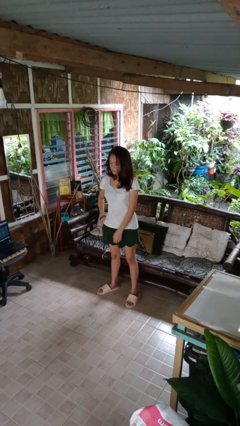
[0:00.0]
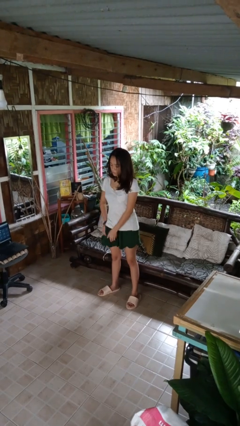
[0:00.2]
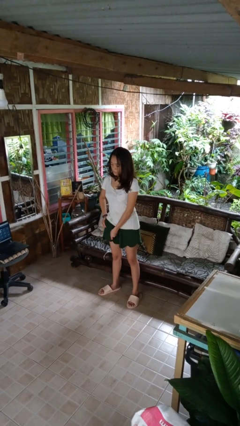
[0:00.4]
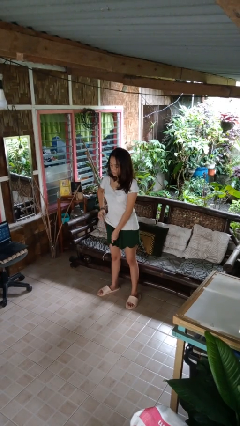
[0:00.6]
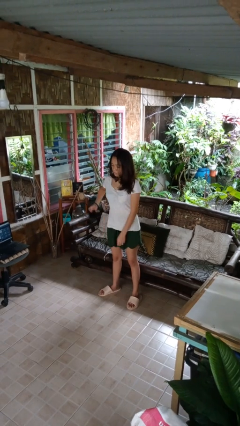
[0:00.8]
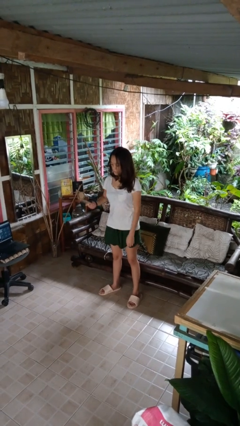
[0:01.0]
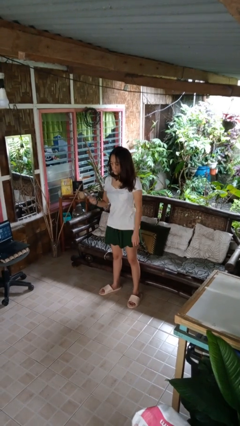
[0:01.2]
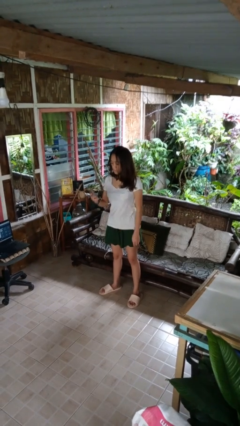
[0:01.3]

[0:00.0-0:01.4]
person takes phone from pocket

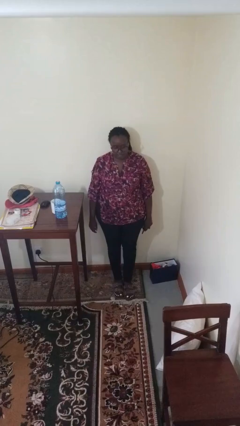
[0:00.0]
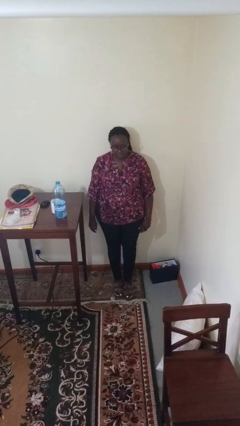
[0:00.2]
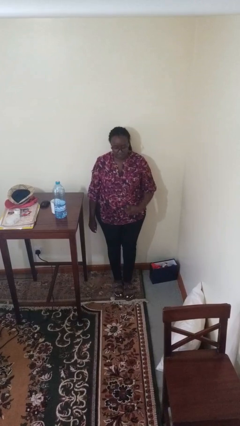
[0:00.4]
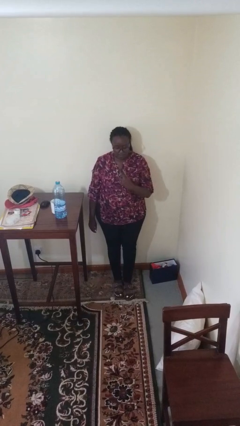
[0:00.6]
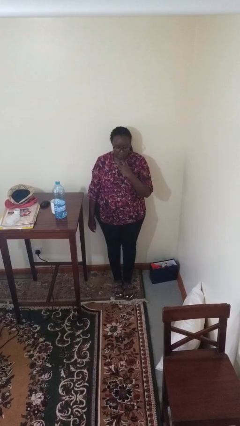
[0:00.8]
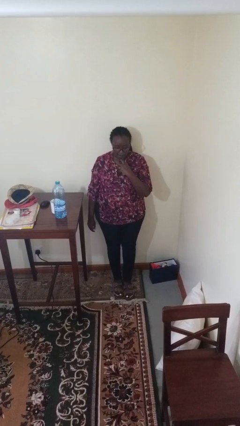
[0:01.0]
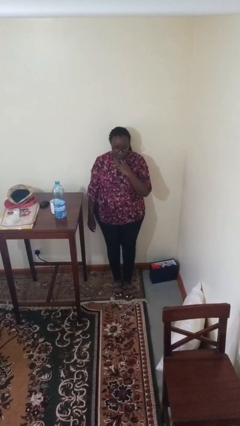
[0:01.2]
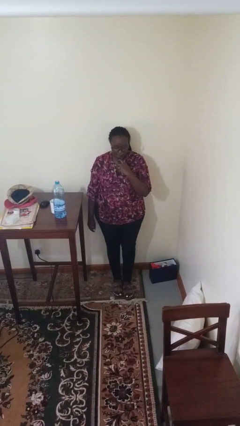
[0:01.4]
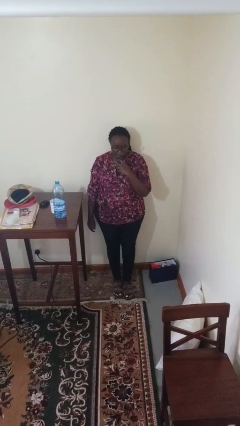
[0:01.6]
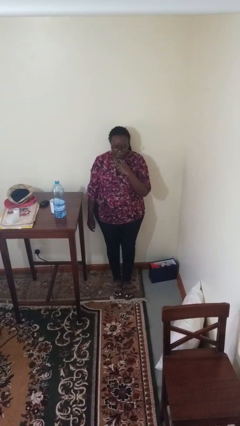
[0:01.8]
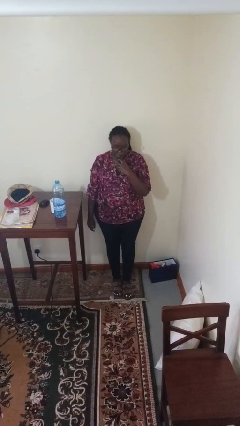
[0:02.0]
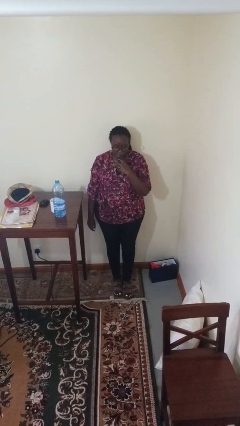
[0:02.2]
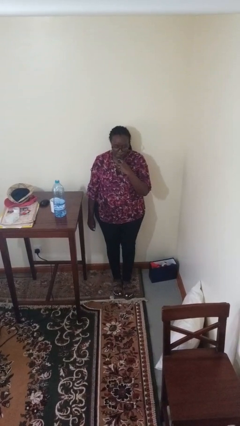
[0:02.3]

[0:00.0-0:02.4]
person vapes

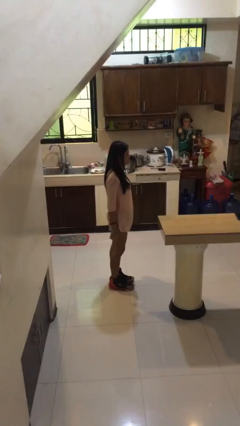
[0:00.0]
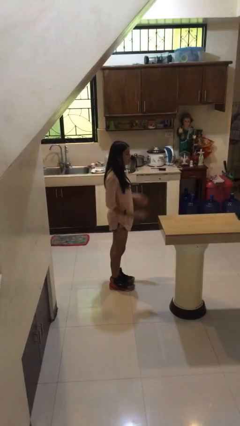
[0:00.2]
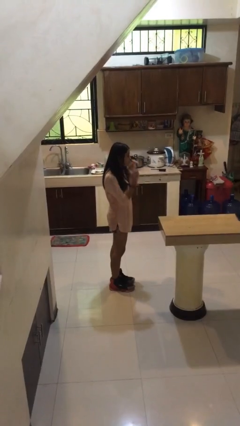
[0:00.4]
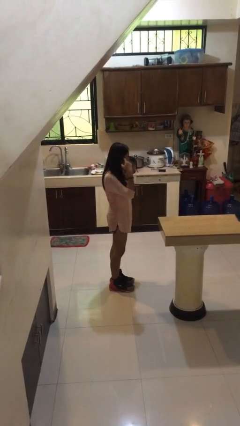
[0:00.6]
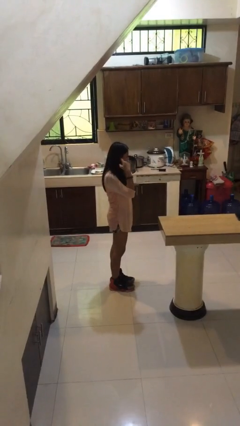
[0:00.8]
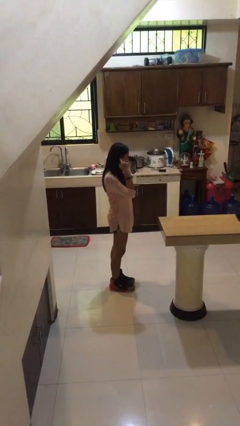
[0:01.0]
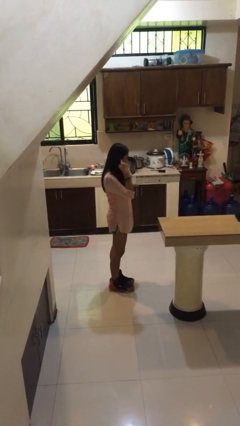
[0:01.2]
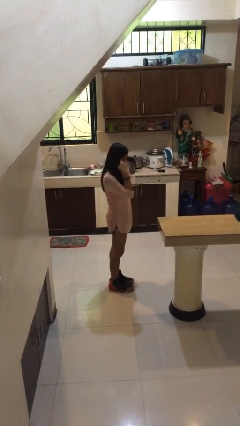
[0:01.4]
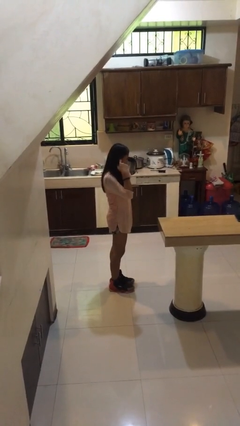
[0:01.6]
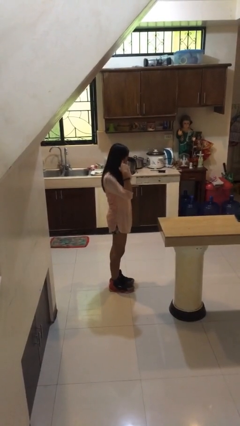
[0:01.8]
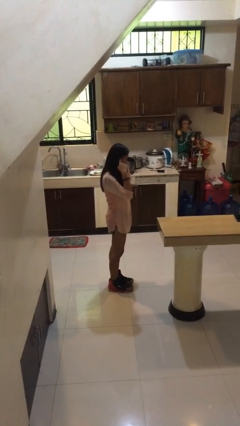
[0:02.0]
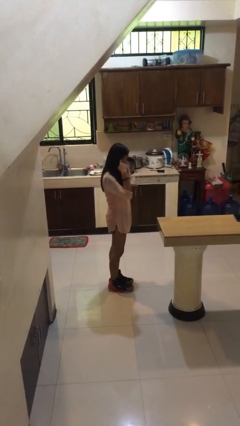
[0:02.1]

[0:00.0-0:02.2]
person puts fingers in ear

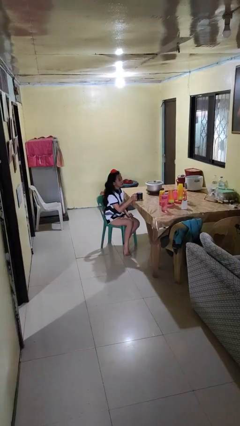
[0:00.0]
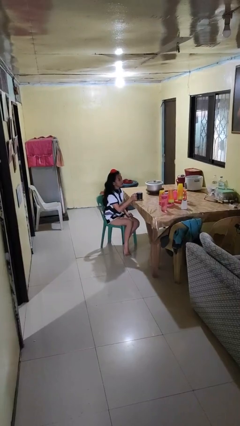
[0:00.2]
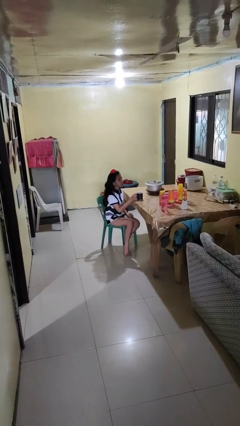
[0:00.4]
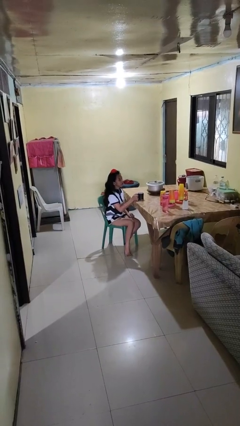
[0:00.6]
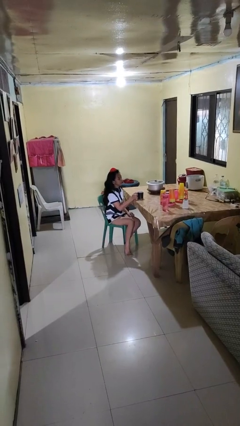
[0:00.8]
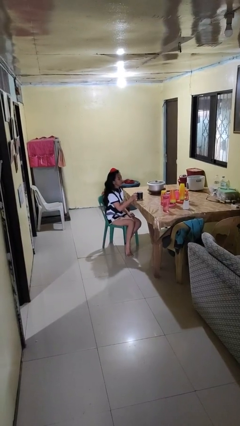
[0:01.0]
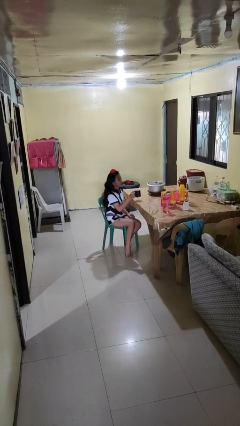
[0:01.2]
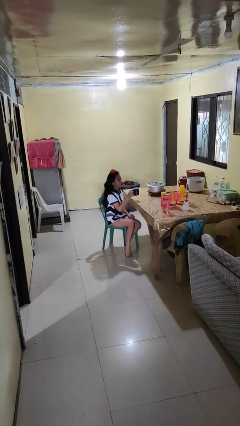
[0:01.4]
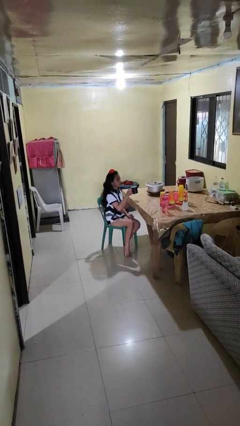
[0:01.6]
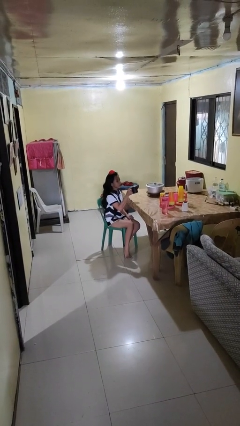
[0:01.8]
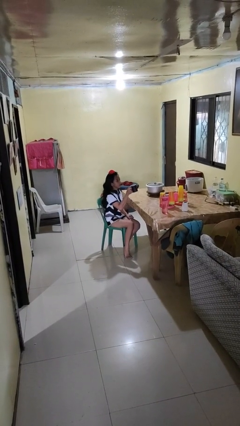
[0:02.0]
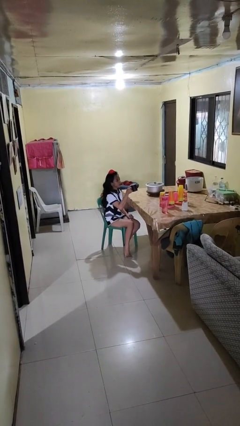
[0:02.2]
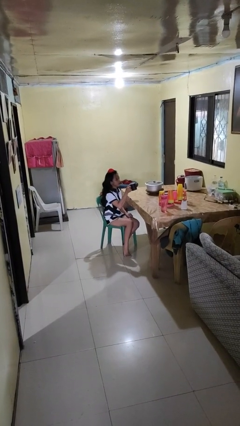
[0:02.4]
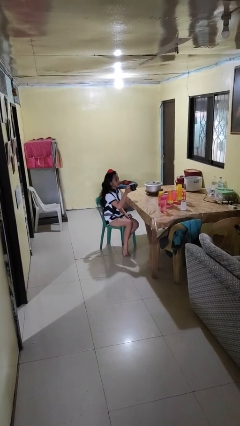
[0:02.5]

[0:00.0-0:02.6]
person picks up object from table

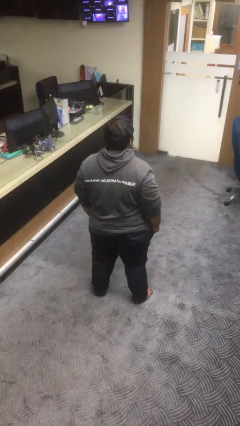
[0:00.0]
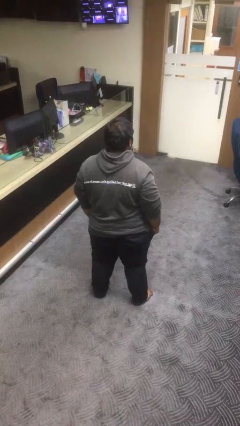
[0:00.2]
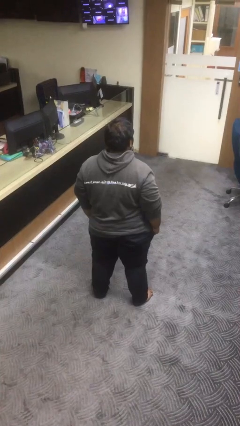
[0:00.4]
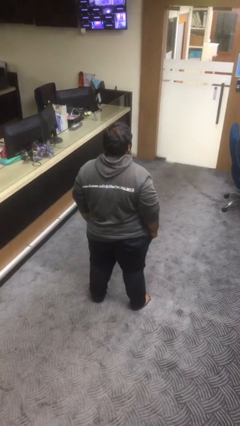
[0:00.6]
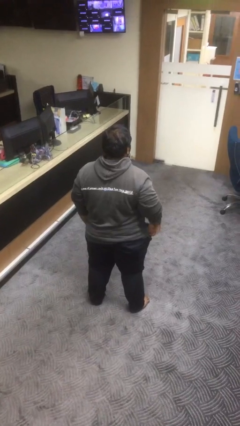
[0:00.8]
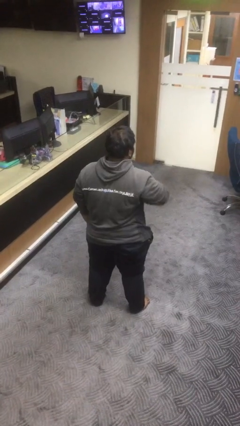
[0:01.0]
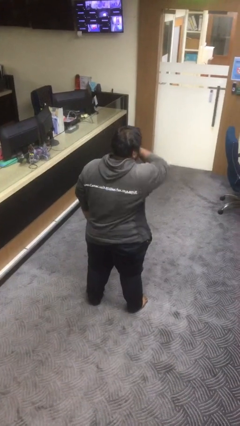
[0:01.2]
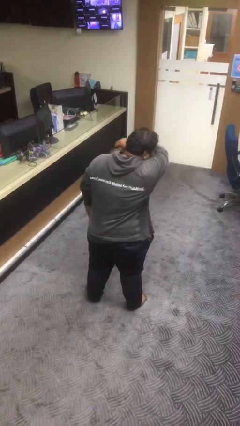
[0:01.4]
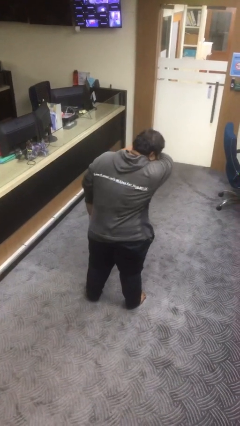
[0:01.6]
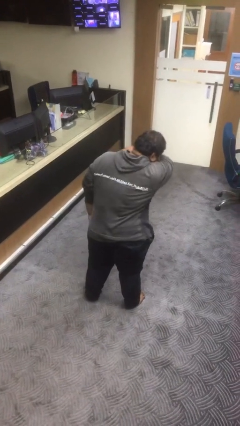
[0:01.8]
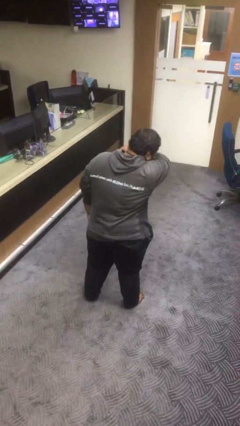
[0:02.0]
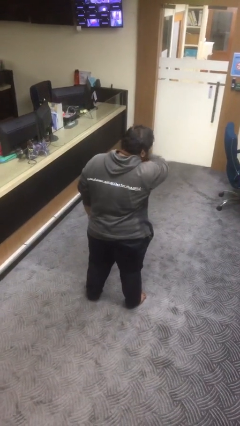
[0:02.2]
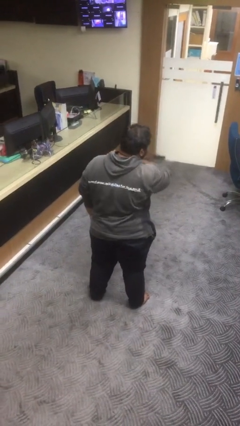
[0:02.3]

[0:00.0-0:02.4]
person sneezes into arm

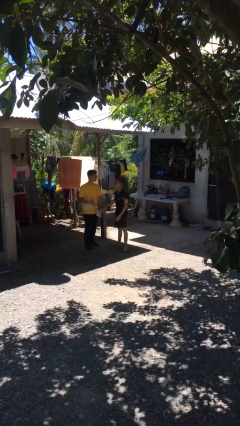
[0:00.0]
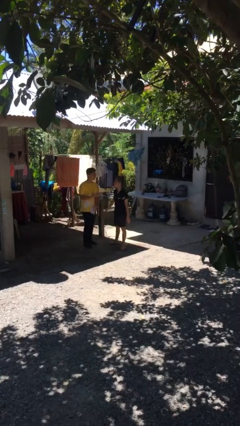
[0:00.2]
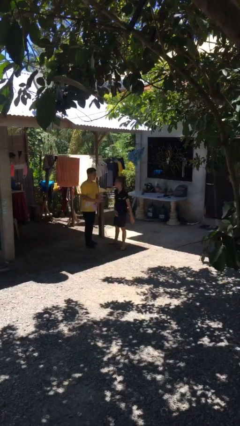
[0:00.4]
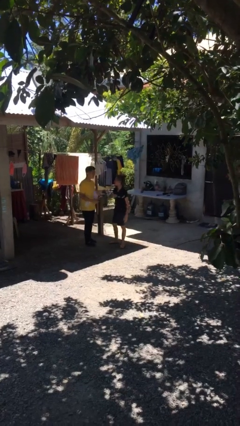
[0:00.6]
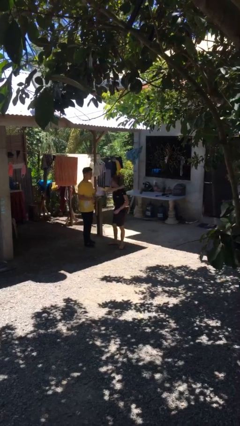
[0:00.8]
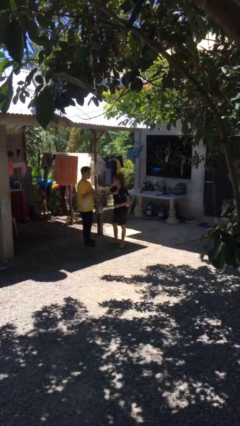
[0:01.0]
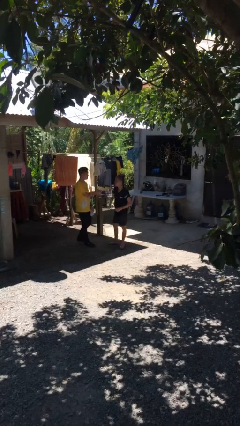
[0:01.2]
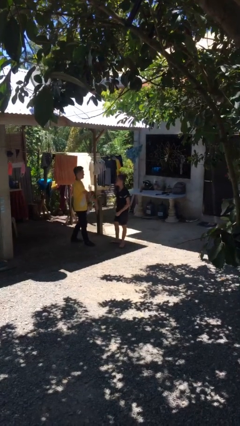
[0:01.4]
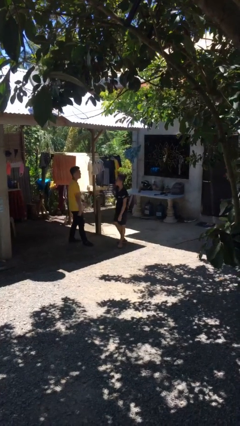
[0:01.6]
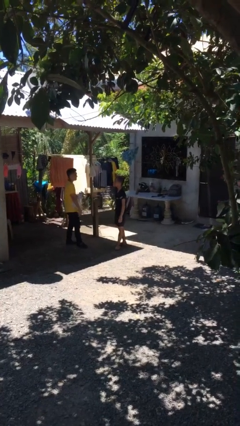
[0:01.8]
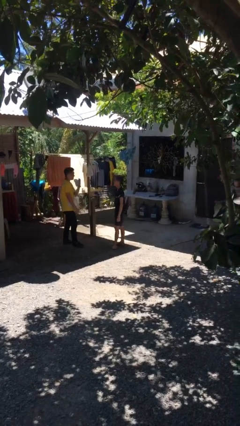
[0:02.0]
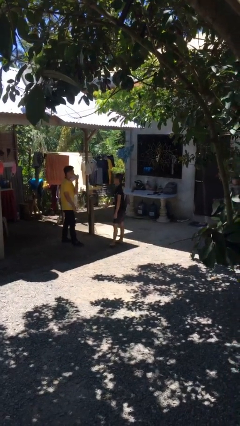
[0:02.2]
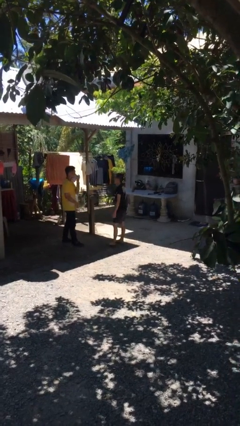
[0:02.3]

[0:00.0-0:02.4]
person talks to person

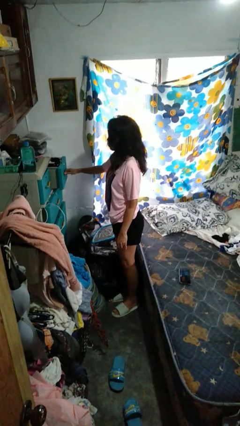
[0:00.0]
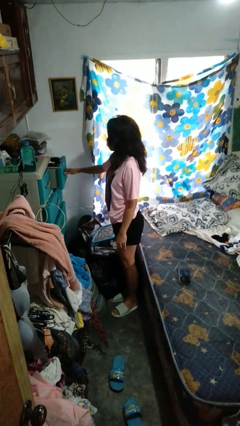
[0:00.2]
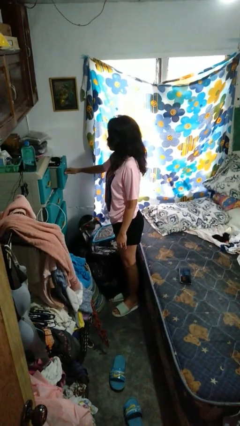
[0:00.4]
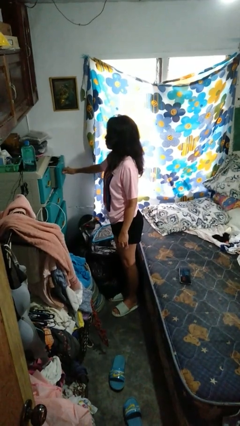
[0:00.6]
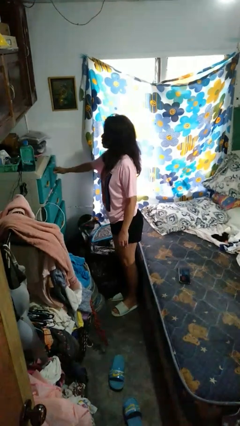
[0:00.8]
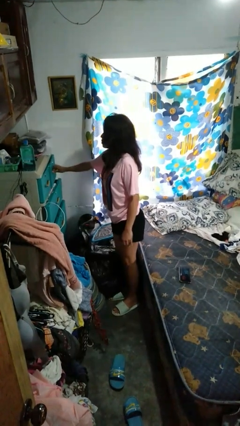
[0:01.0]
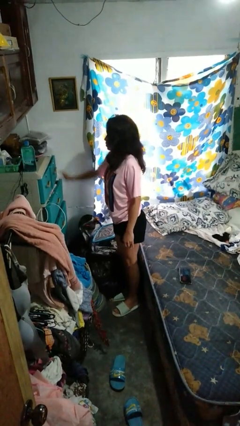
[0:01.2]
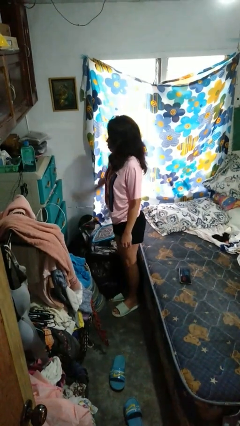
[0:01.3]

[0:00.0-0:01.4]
person closes dresser drawer

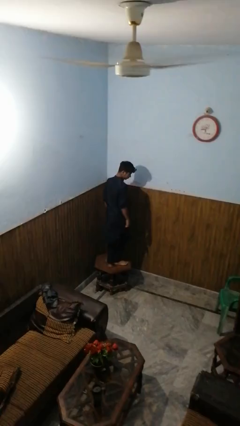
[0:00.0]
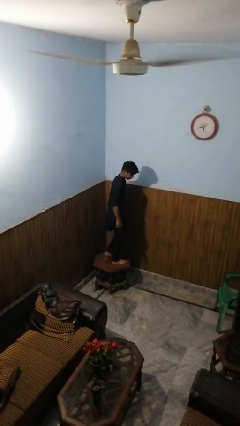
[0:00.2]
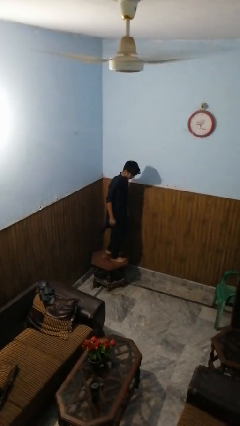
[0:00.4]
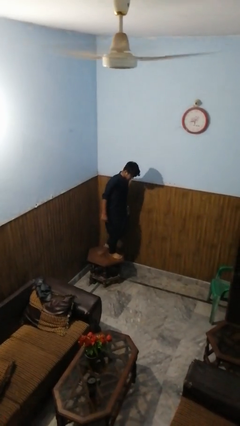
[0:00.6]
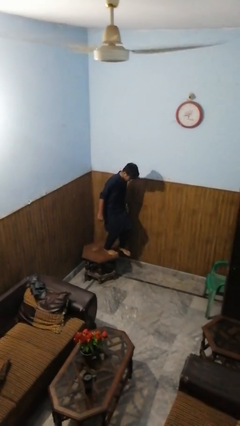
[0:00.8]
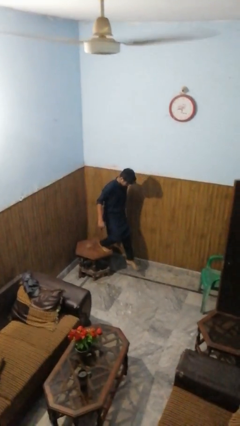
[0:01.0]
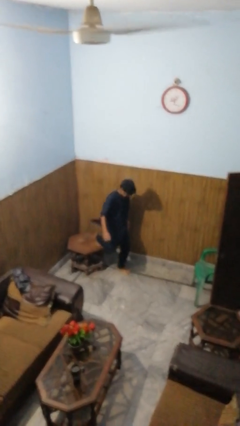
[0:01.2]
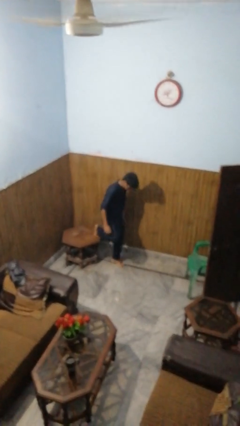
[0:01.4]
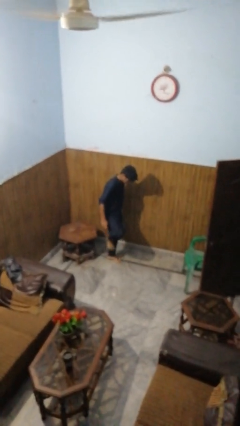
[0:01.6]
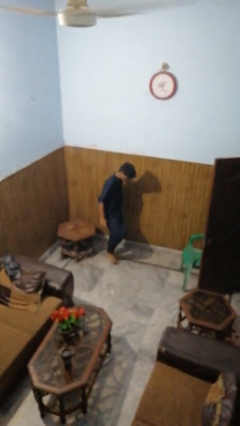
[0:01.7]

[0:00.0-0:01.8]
person climbs off table

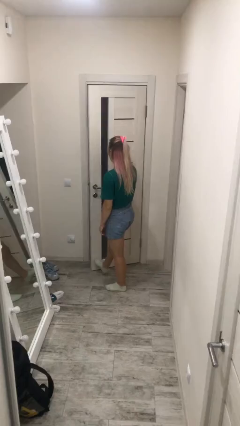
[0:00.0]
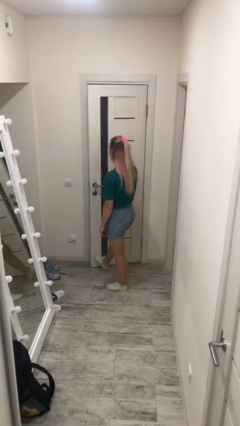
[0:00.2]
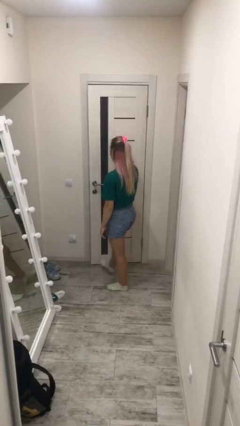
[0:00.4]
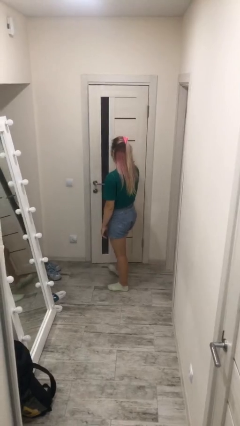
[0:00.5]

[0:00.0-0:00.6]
person closes door with foot
